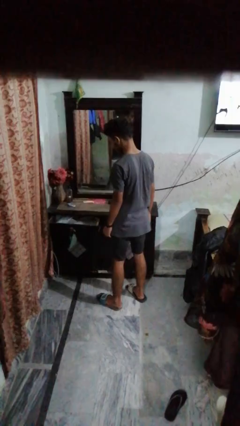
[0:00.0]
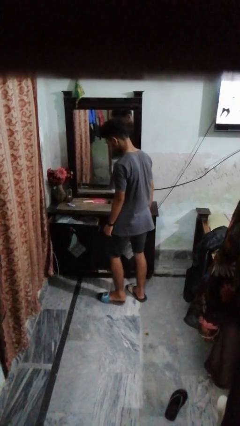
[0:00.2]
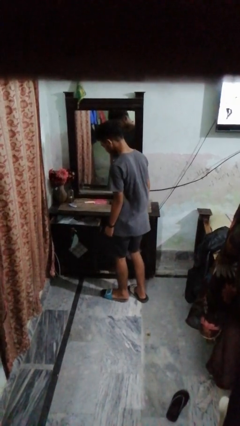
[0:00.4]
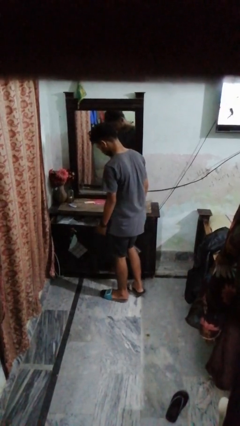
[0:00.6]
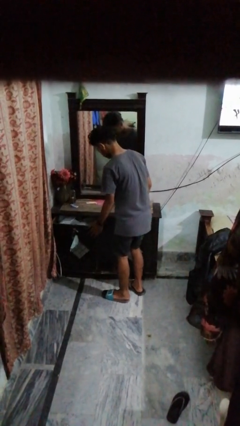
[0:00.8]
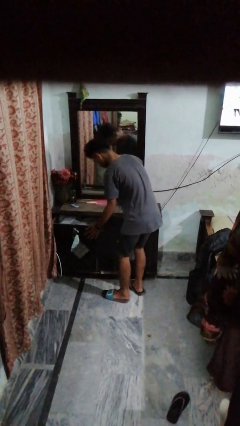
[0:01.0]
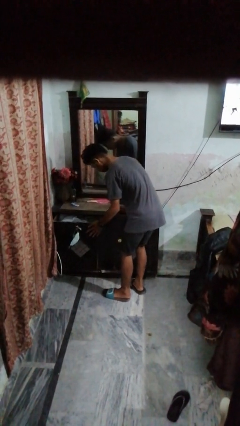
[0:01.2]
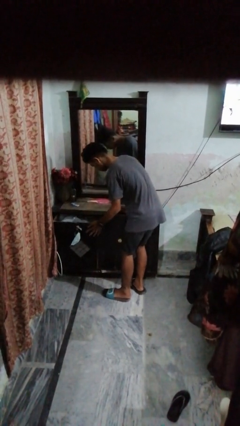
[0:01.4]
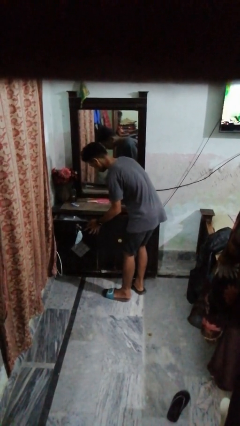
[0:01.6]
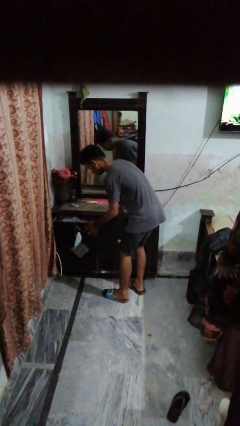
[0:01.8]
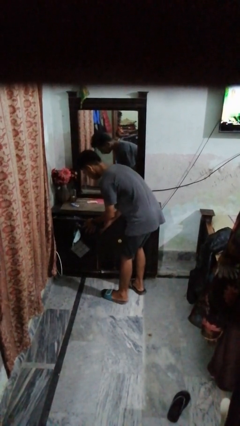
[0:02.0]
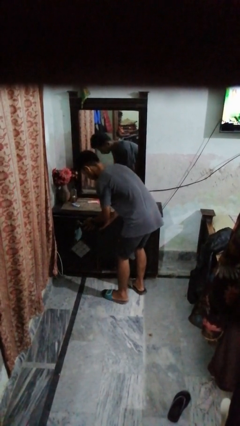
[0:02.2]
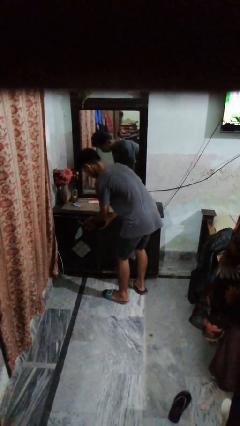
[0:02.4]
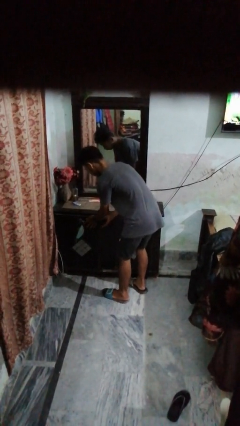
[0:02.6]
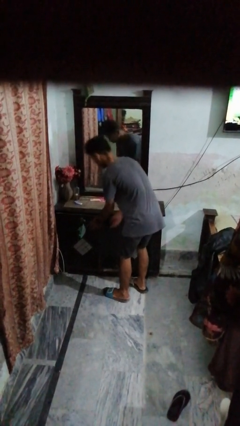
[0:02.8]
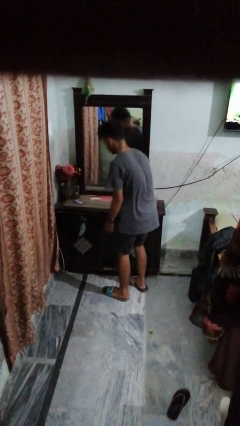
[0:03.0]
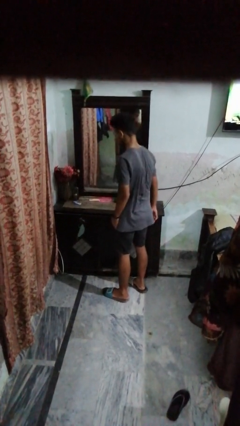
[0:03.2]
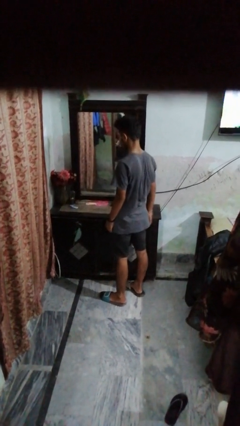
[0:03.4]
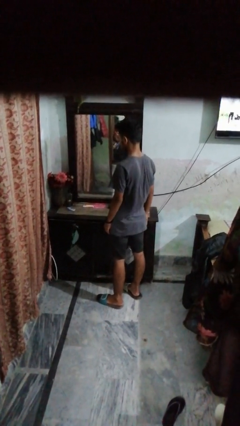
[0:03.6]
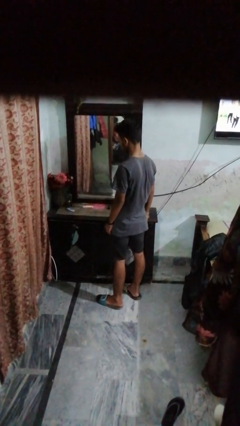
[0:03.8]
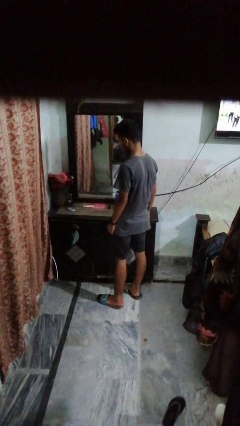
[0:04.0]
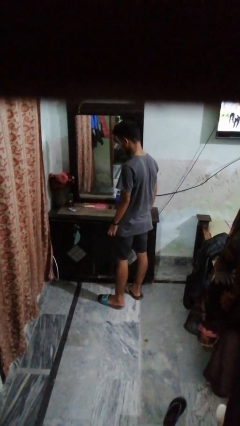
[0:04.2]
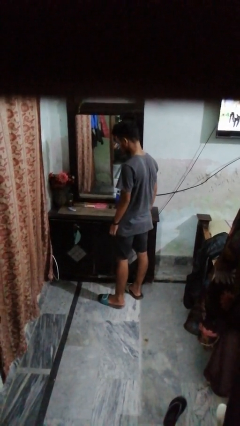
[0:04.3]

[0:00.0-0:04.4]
person closes dresser drawer

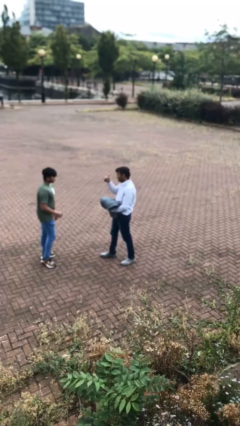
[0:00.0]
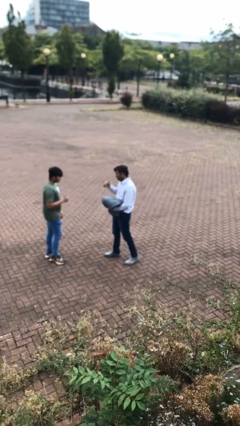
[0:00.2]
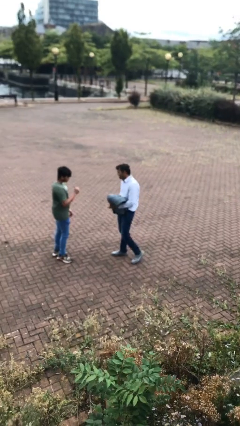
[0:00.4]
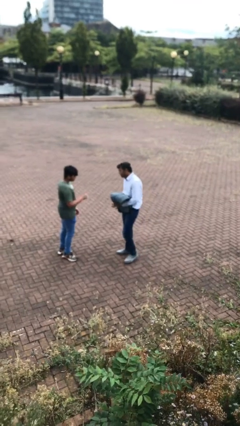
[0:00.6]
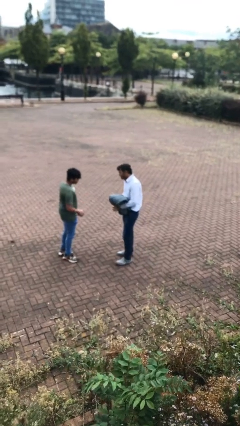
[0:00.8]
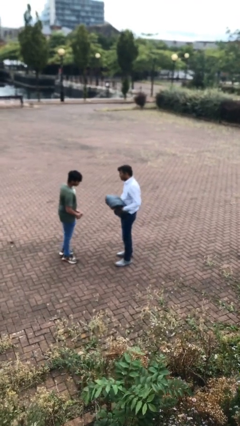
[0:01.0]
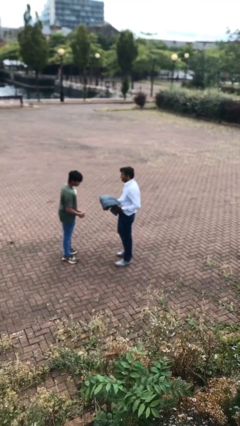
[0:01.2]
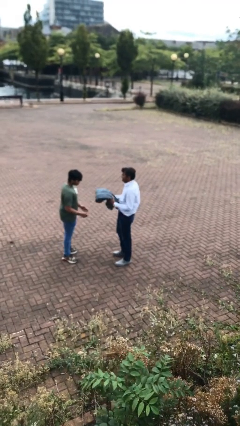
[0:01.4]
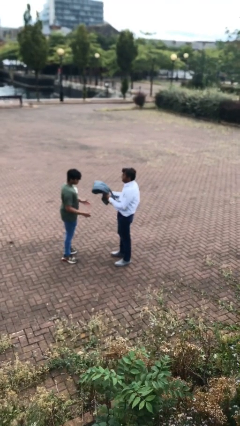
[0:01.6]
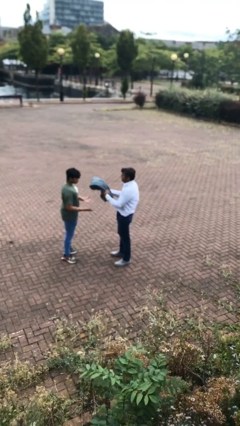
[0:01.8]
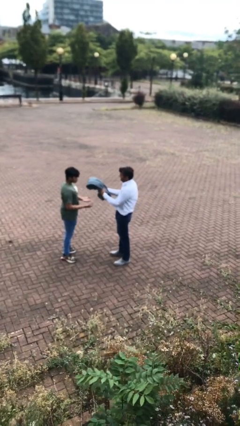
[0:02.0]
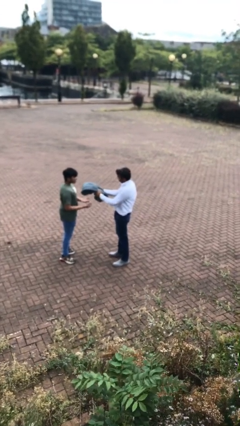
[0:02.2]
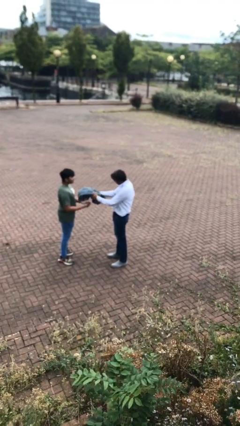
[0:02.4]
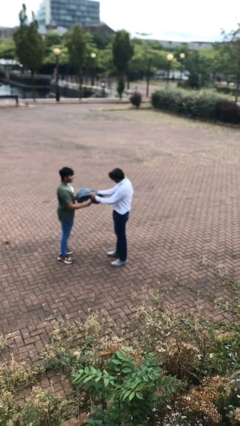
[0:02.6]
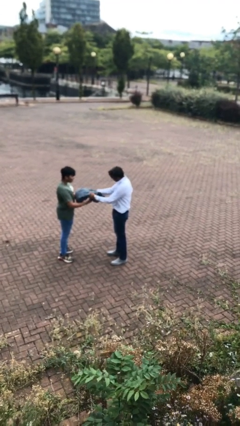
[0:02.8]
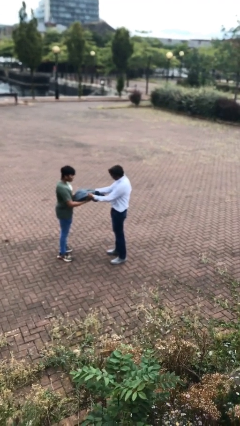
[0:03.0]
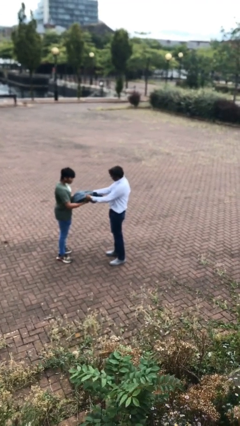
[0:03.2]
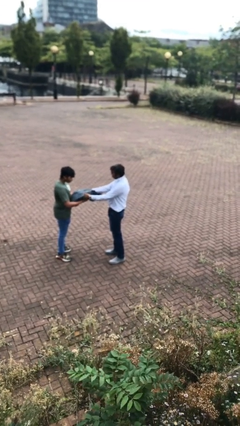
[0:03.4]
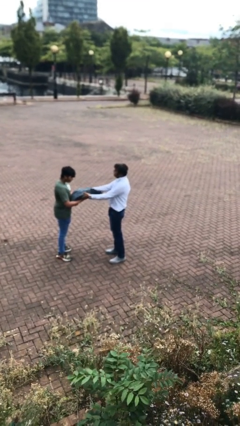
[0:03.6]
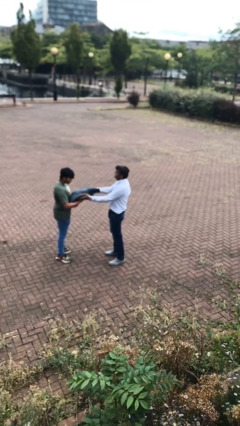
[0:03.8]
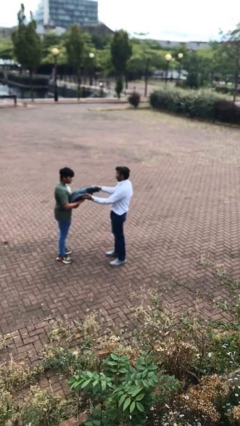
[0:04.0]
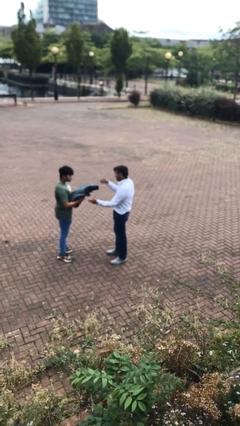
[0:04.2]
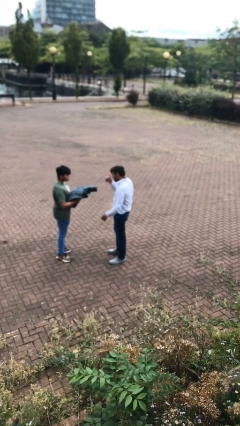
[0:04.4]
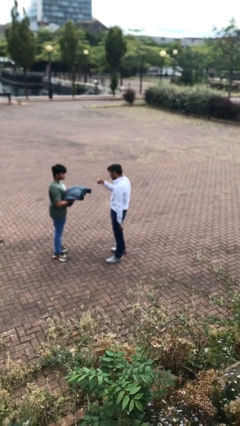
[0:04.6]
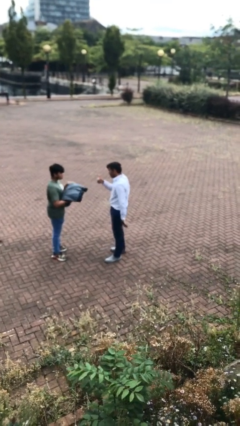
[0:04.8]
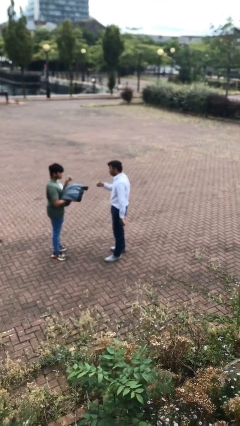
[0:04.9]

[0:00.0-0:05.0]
person transfers object to person

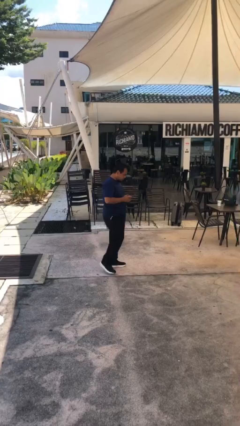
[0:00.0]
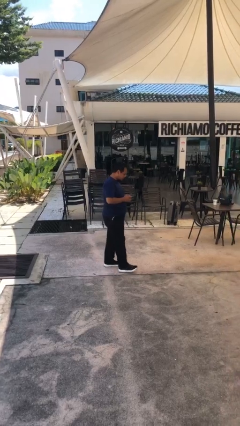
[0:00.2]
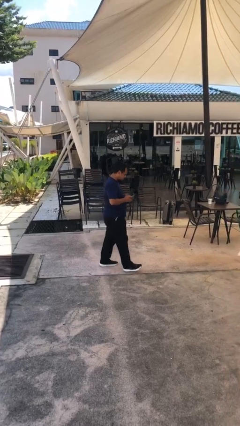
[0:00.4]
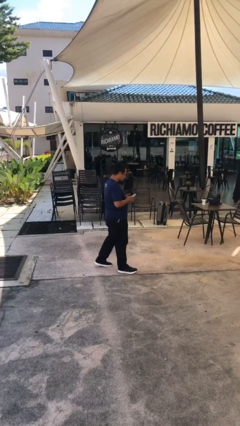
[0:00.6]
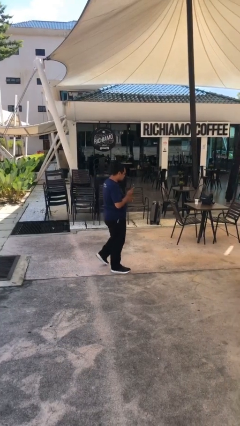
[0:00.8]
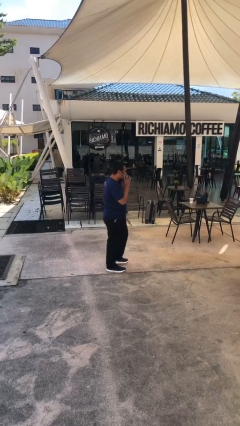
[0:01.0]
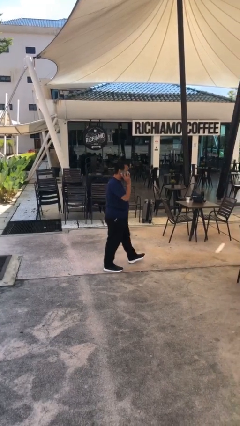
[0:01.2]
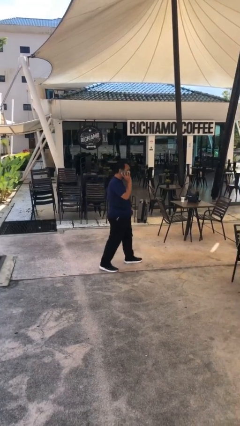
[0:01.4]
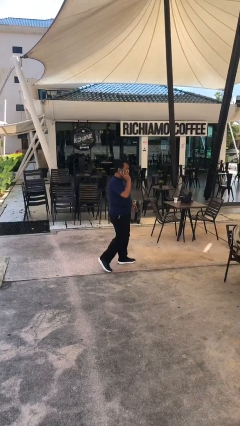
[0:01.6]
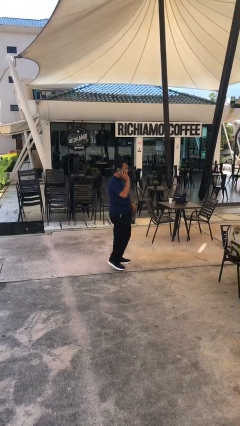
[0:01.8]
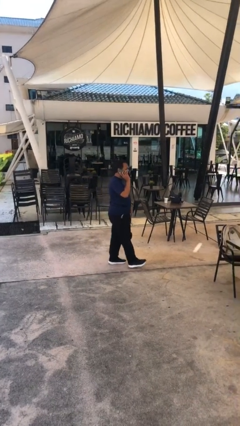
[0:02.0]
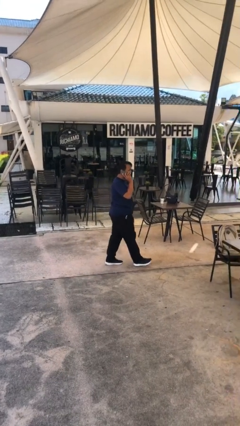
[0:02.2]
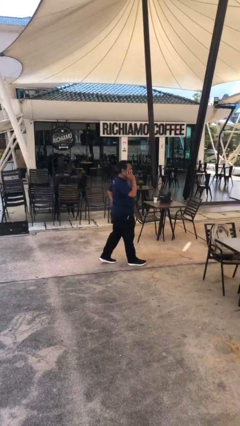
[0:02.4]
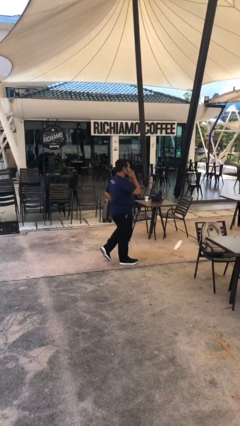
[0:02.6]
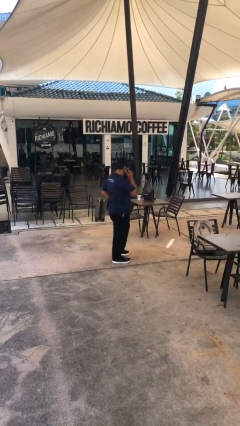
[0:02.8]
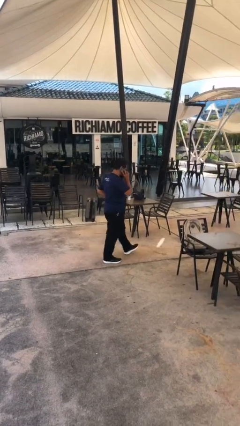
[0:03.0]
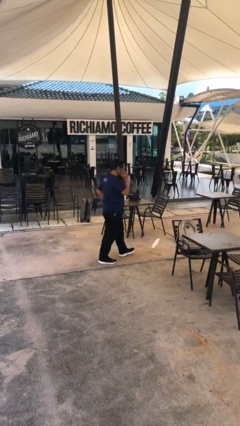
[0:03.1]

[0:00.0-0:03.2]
person talks on phone

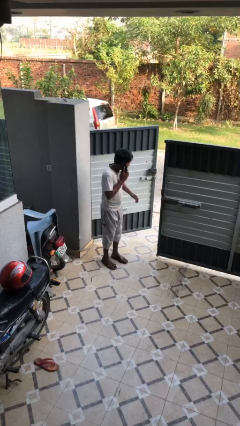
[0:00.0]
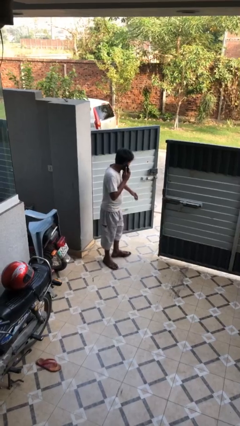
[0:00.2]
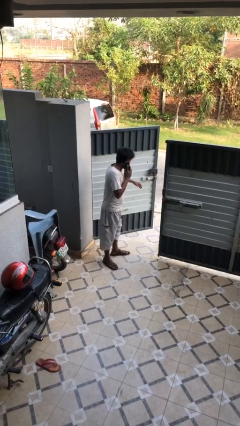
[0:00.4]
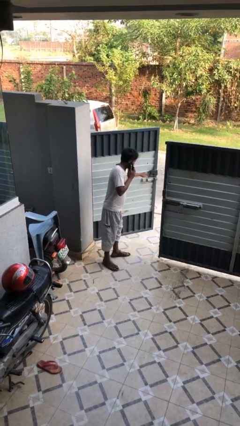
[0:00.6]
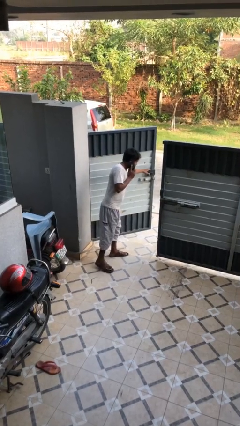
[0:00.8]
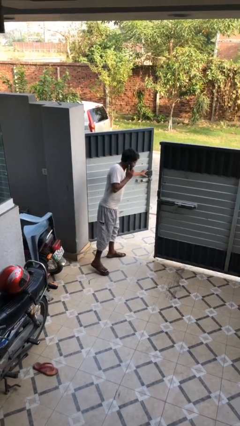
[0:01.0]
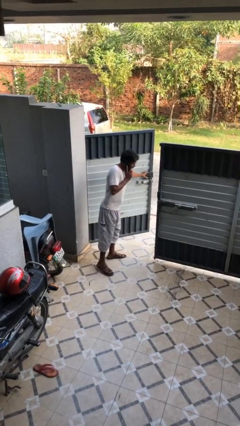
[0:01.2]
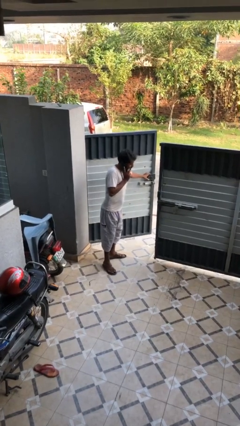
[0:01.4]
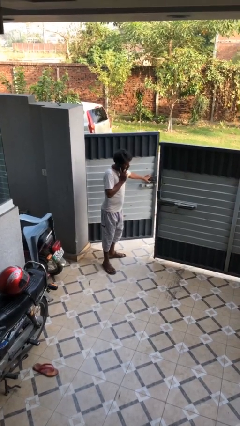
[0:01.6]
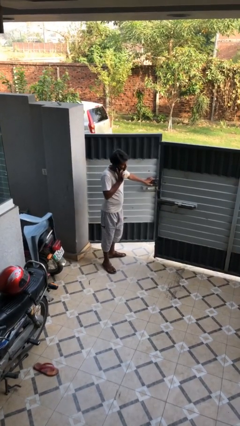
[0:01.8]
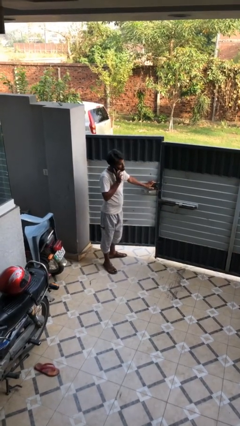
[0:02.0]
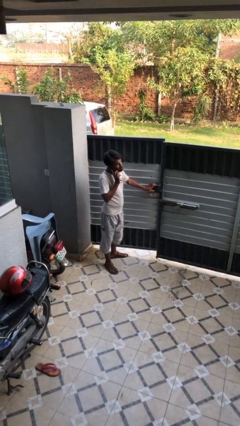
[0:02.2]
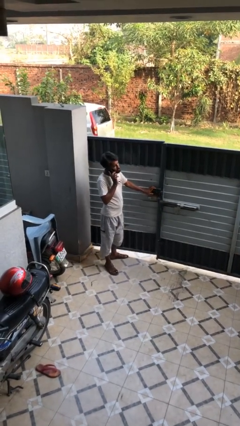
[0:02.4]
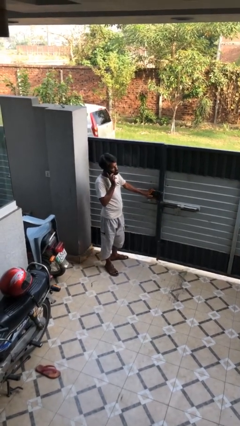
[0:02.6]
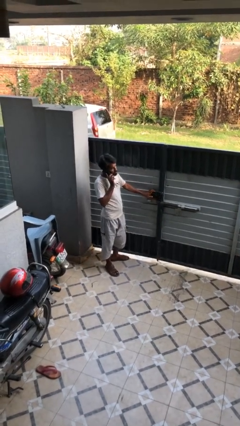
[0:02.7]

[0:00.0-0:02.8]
person closes facility door

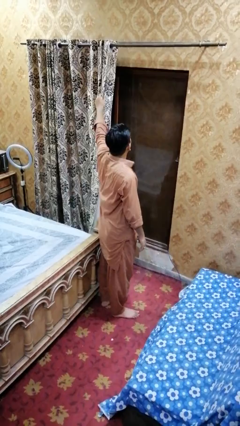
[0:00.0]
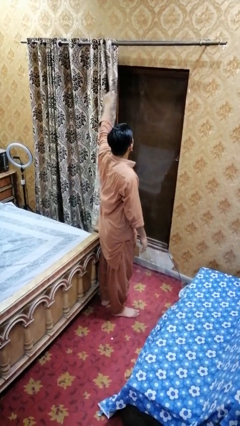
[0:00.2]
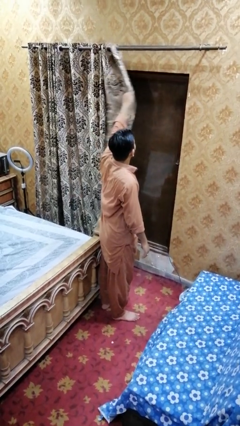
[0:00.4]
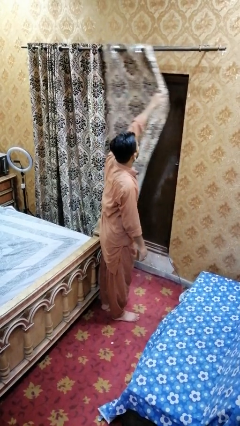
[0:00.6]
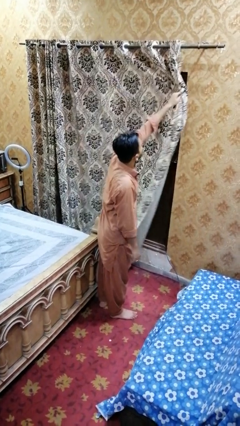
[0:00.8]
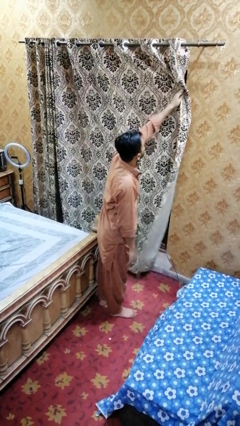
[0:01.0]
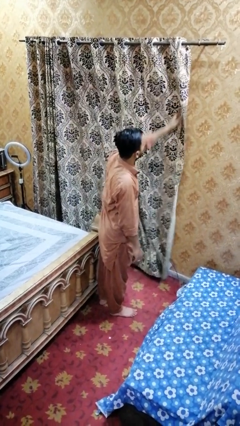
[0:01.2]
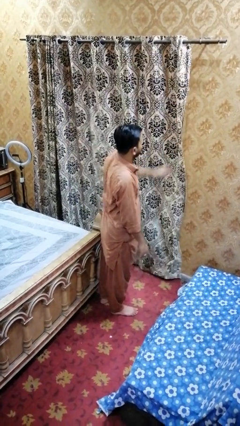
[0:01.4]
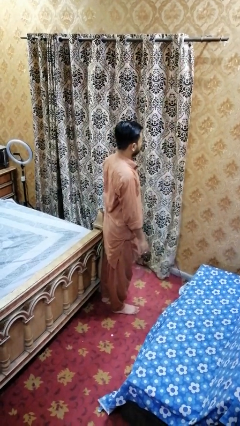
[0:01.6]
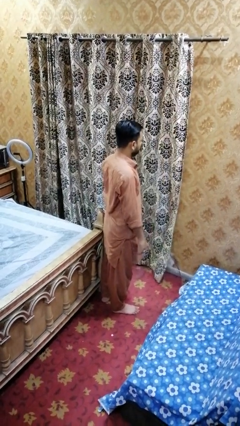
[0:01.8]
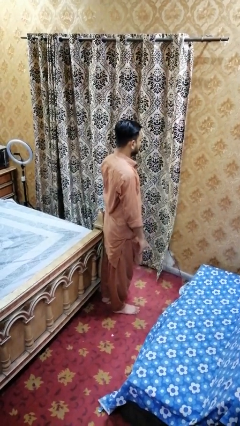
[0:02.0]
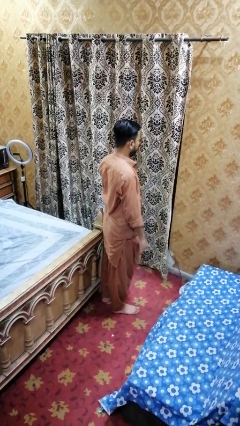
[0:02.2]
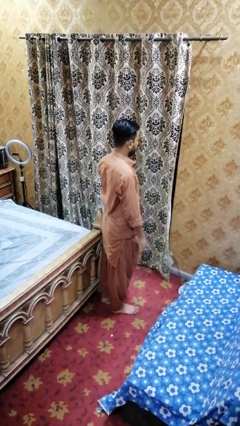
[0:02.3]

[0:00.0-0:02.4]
person closes curtains
